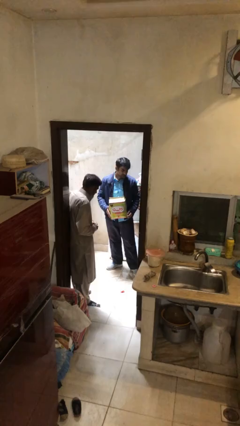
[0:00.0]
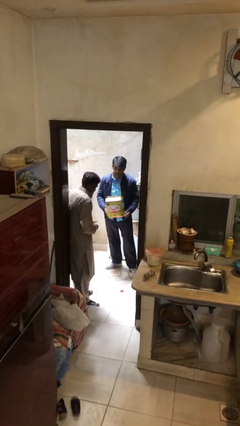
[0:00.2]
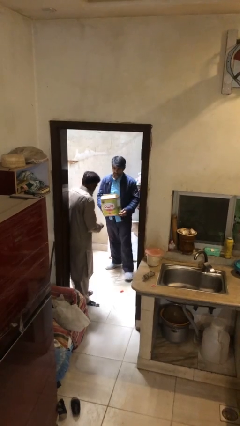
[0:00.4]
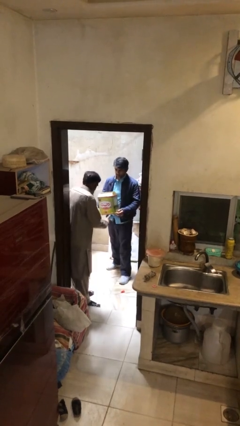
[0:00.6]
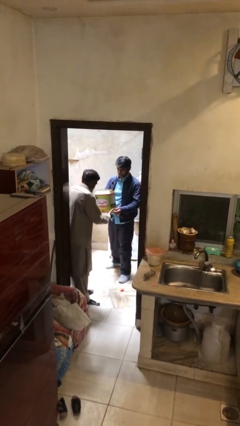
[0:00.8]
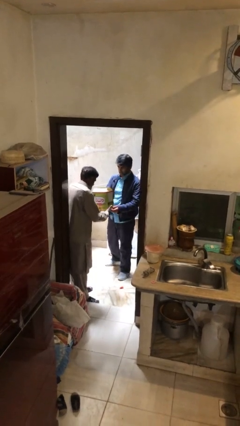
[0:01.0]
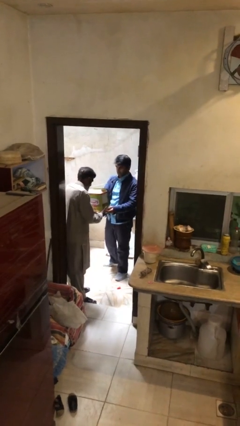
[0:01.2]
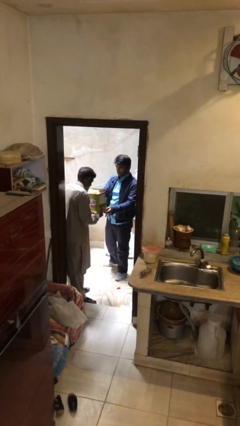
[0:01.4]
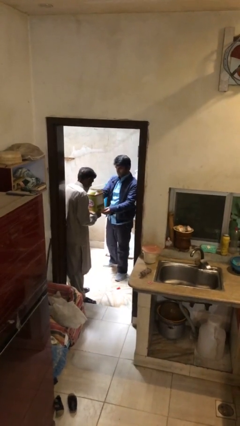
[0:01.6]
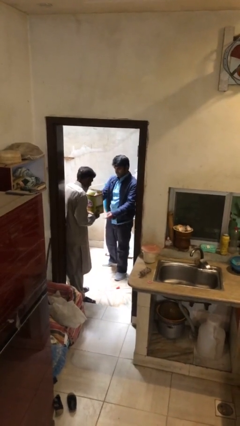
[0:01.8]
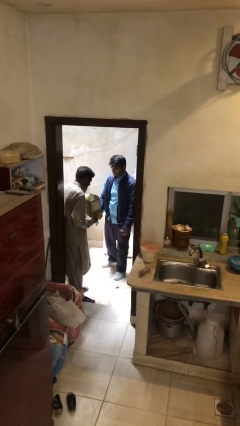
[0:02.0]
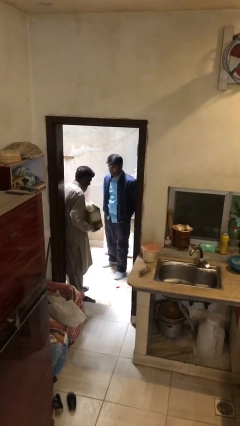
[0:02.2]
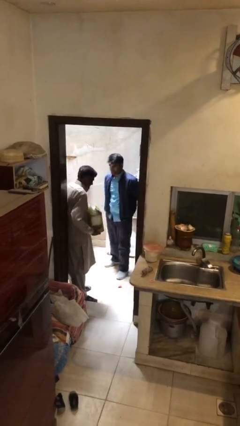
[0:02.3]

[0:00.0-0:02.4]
person transfers object to person

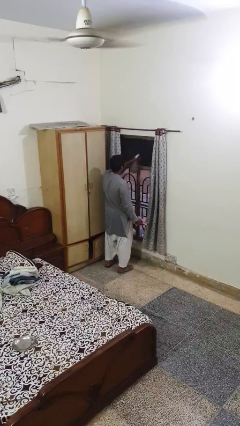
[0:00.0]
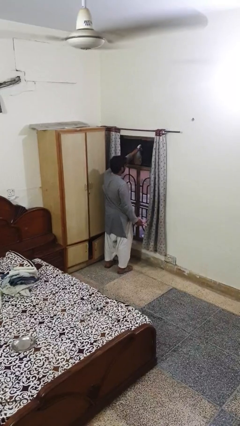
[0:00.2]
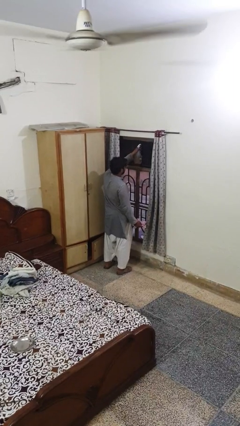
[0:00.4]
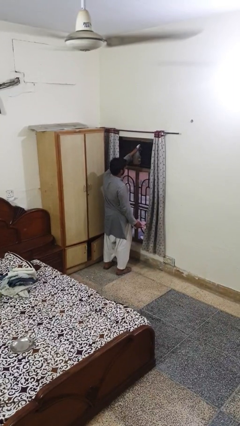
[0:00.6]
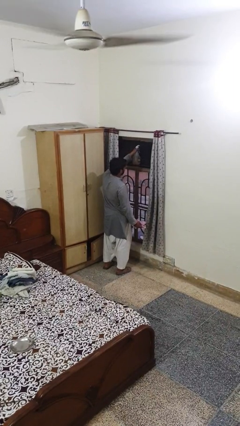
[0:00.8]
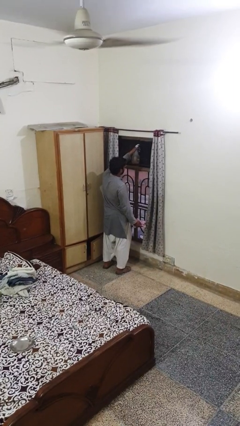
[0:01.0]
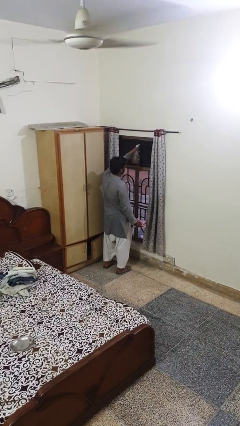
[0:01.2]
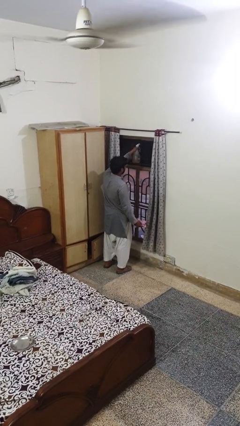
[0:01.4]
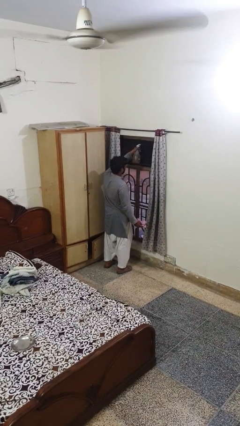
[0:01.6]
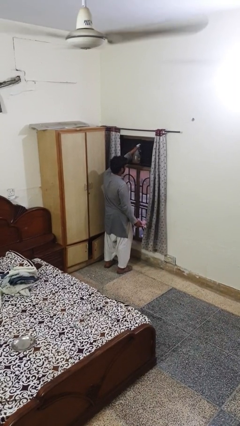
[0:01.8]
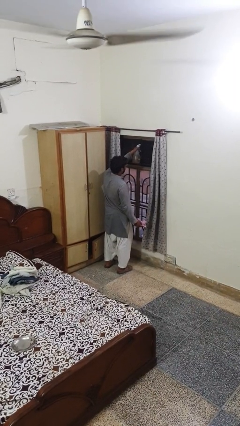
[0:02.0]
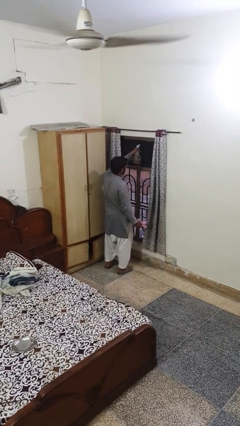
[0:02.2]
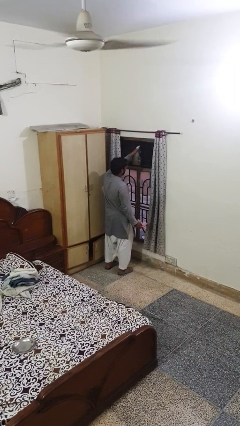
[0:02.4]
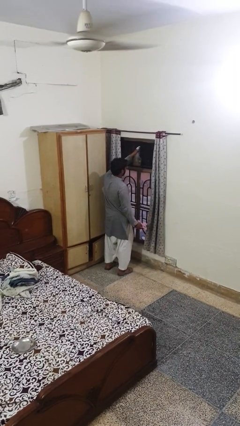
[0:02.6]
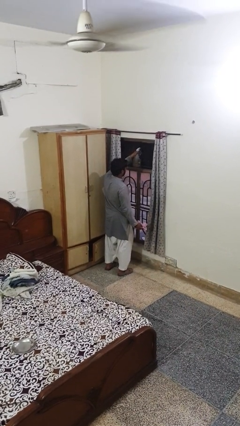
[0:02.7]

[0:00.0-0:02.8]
person sprays from bottle

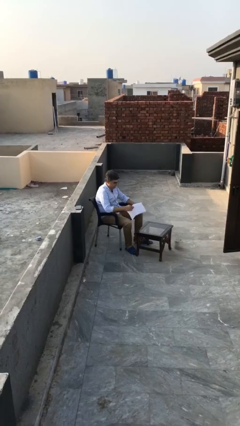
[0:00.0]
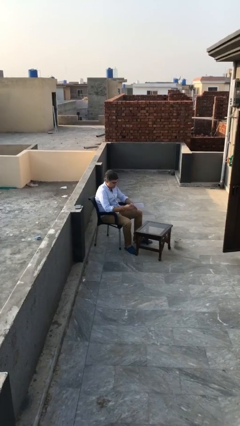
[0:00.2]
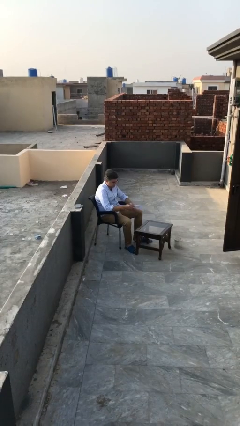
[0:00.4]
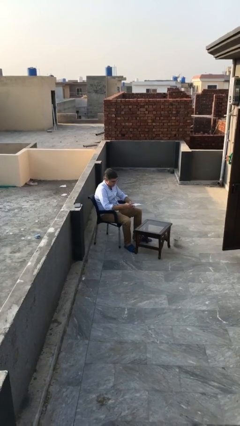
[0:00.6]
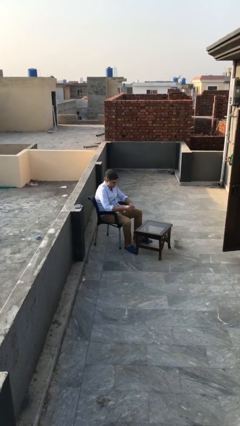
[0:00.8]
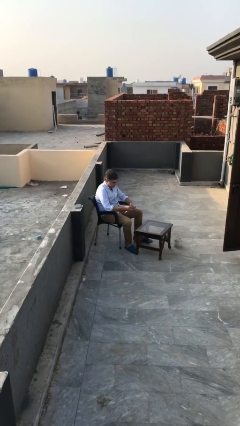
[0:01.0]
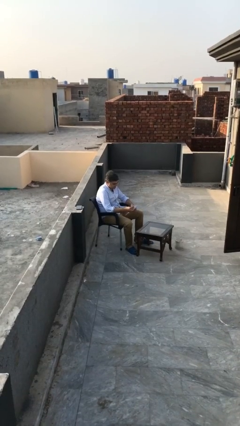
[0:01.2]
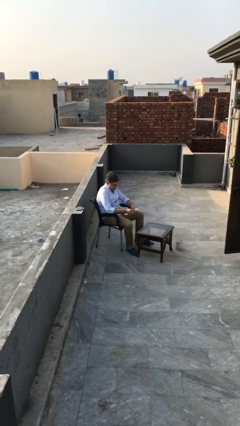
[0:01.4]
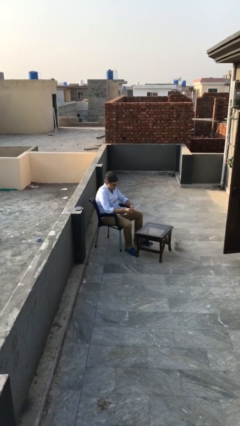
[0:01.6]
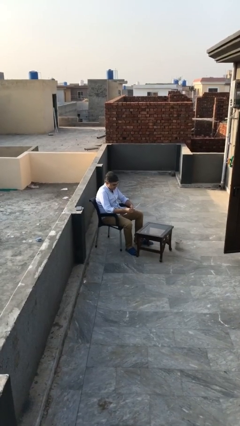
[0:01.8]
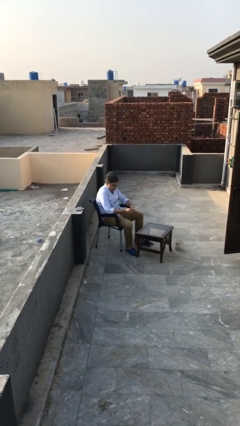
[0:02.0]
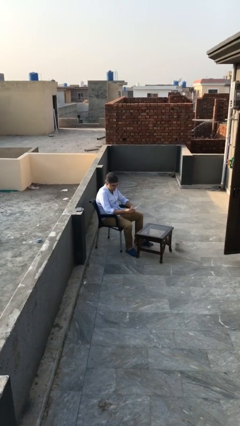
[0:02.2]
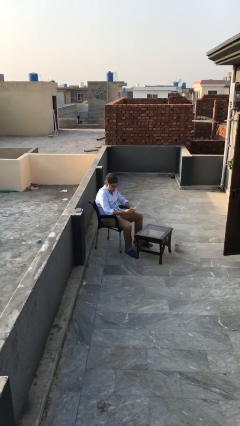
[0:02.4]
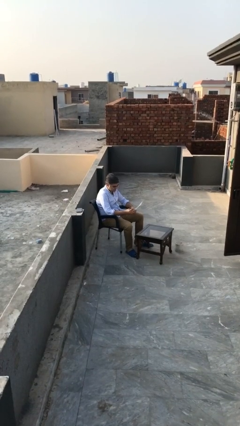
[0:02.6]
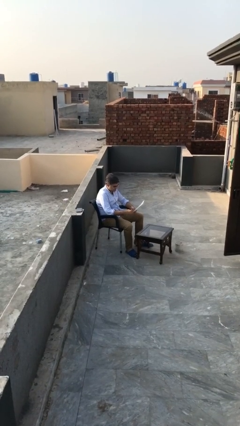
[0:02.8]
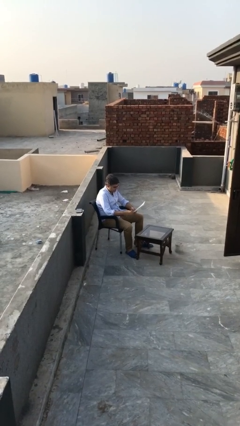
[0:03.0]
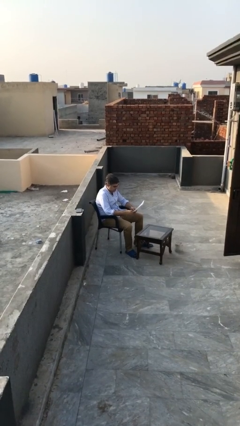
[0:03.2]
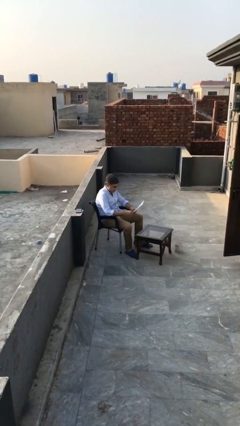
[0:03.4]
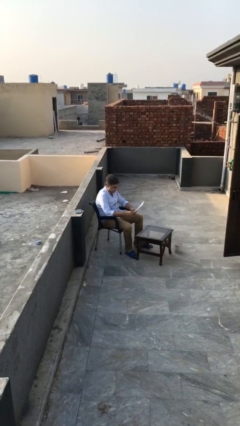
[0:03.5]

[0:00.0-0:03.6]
person reads document

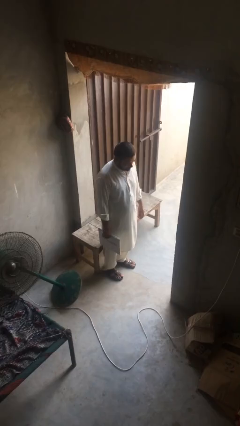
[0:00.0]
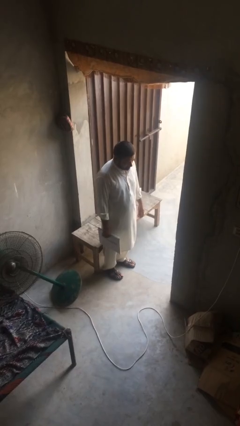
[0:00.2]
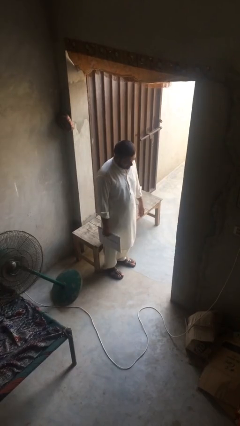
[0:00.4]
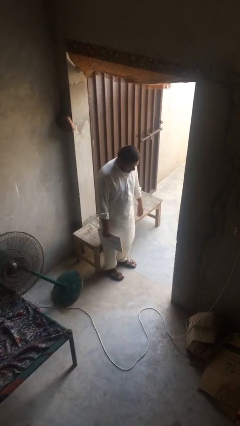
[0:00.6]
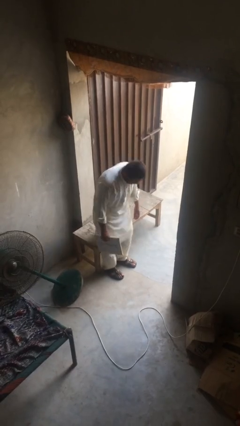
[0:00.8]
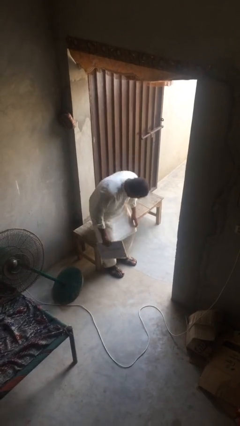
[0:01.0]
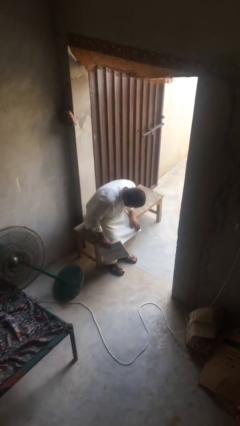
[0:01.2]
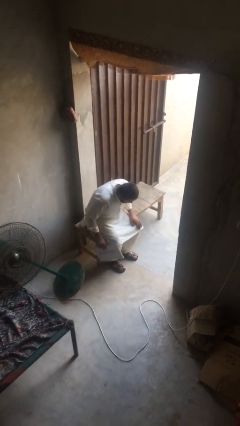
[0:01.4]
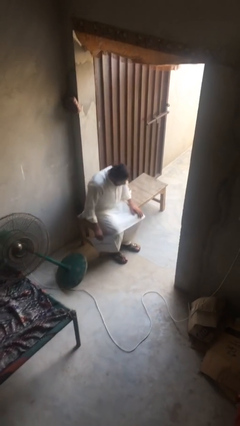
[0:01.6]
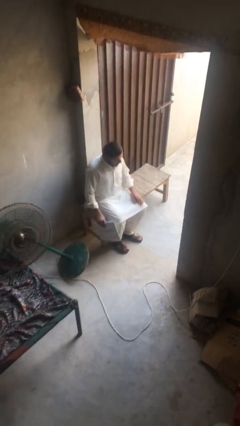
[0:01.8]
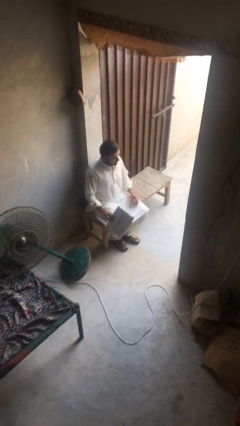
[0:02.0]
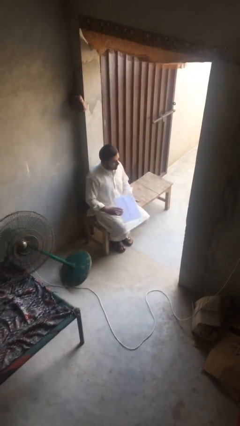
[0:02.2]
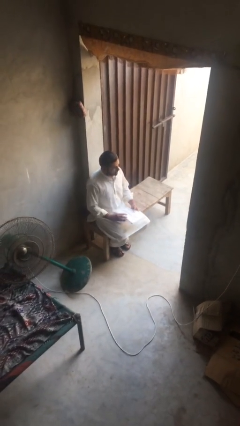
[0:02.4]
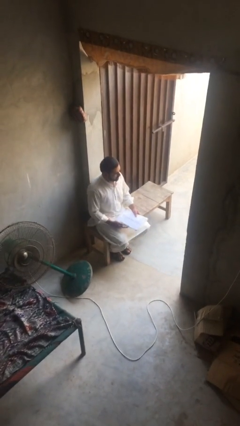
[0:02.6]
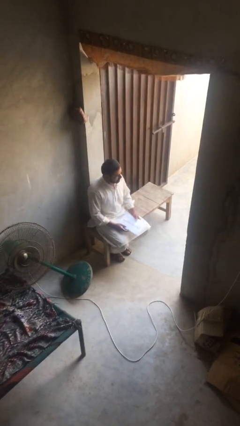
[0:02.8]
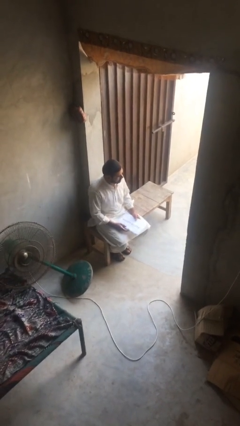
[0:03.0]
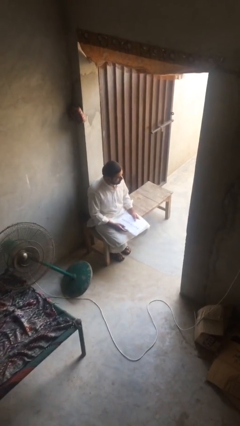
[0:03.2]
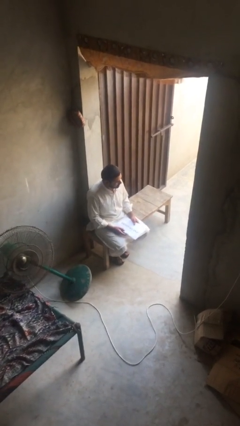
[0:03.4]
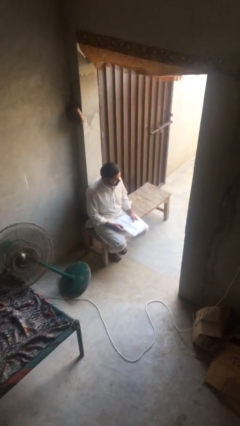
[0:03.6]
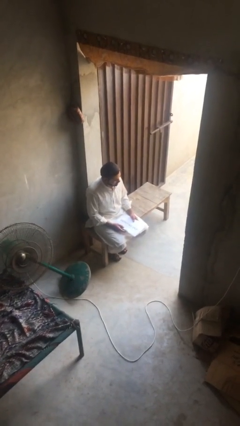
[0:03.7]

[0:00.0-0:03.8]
person sits down

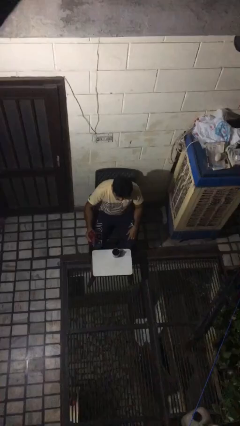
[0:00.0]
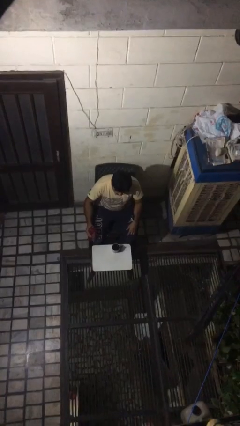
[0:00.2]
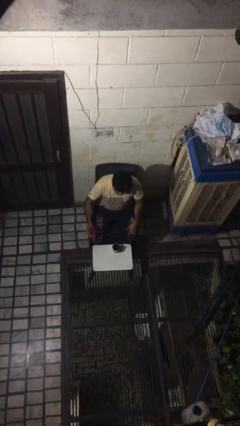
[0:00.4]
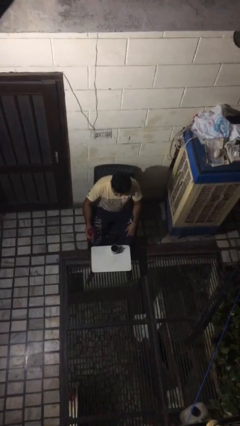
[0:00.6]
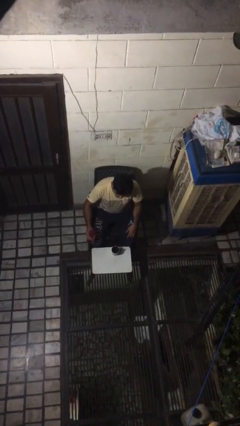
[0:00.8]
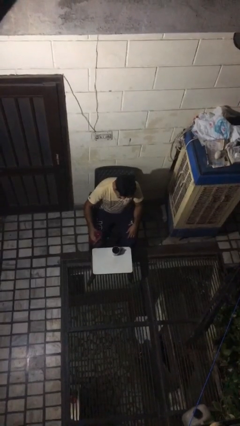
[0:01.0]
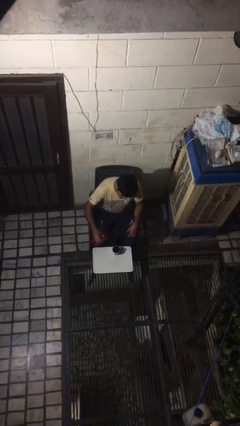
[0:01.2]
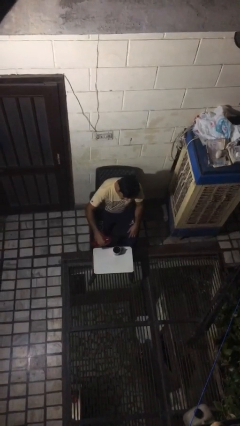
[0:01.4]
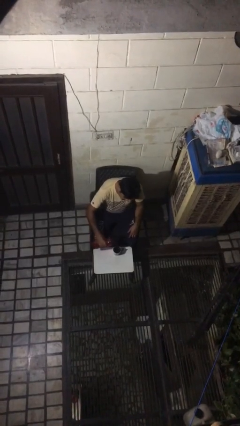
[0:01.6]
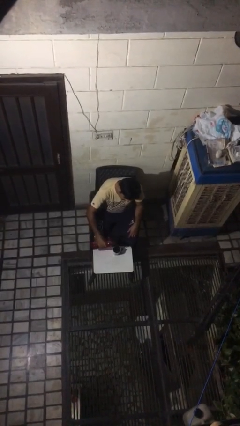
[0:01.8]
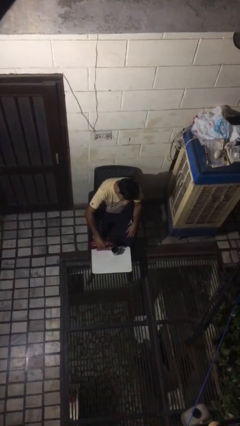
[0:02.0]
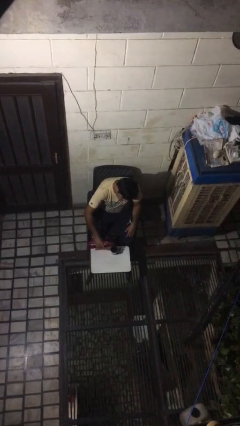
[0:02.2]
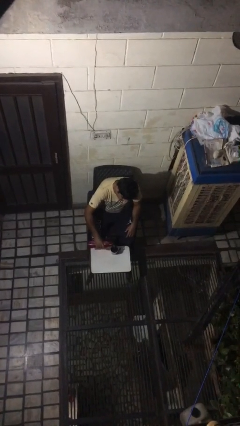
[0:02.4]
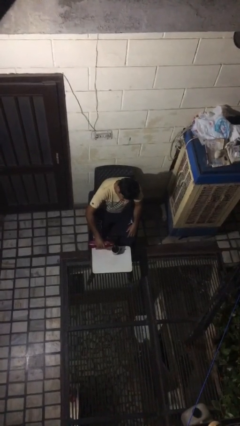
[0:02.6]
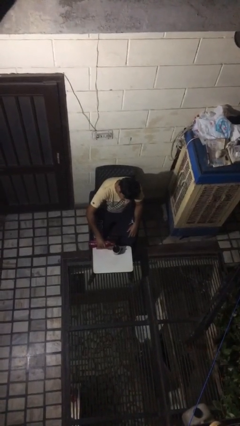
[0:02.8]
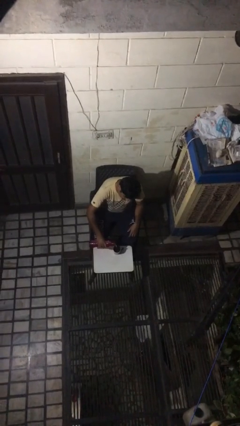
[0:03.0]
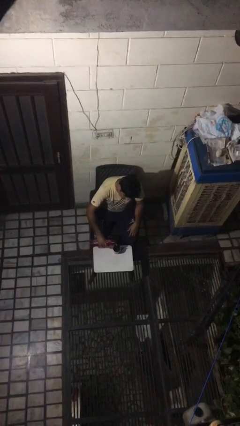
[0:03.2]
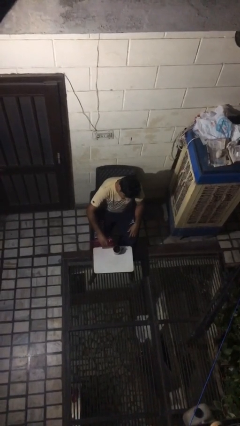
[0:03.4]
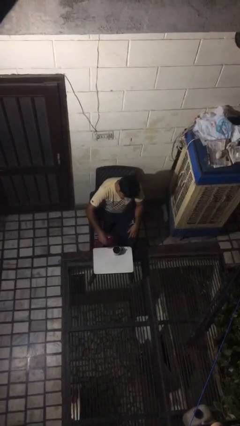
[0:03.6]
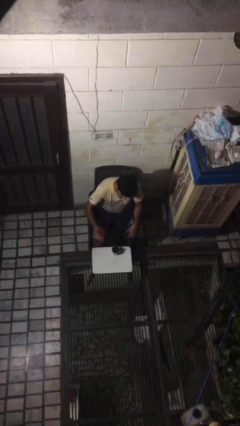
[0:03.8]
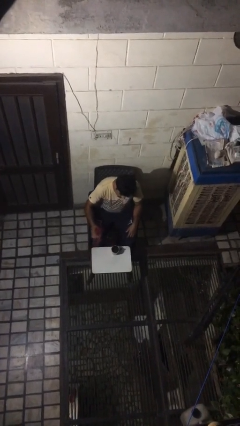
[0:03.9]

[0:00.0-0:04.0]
person pours liquid into cup

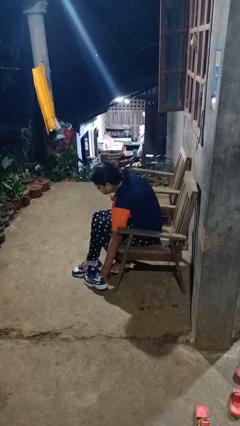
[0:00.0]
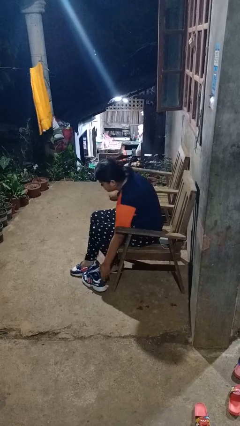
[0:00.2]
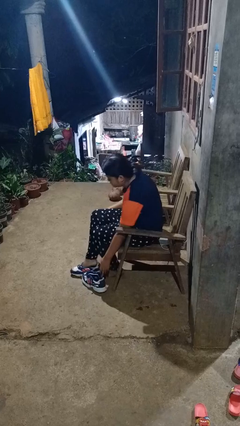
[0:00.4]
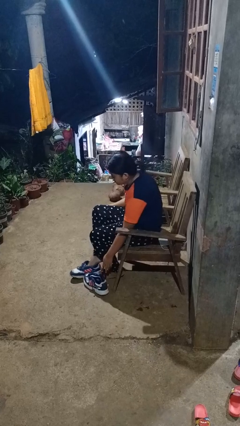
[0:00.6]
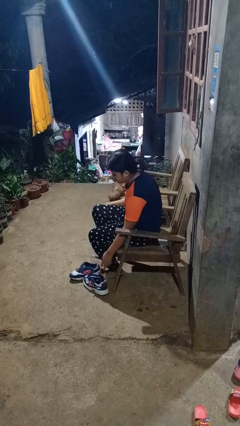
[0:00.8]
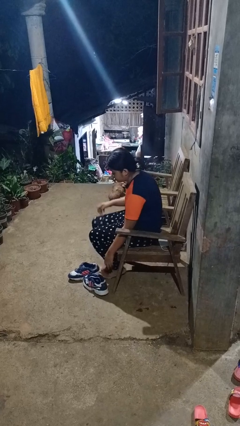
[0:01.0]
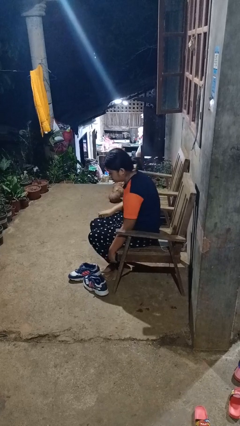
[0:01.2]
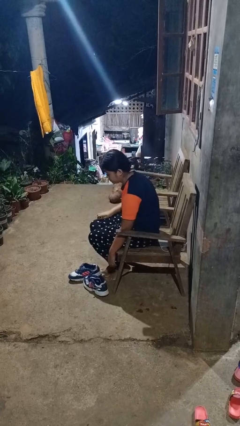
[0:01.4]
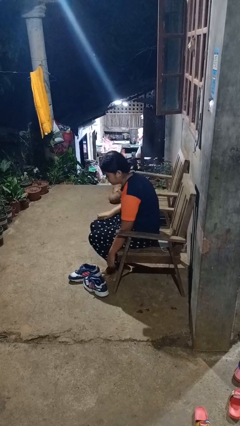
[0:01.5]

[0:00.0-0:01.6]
person takes off shoes
